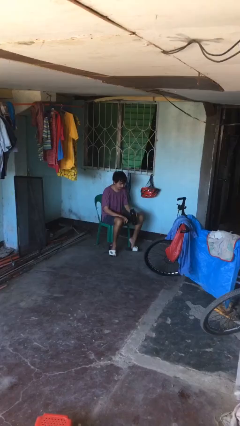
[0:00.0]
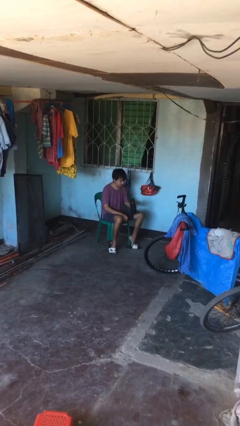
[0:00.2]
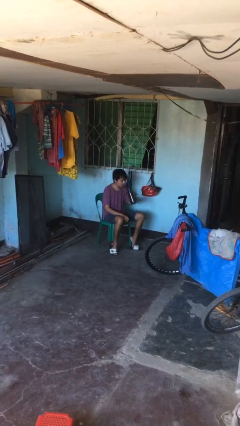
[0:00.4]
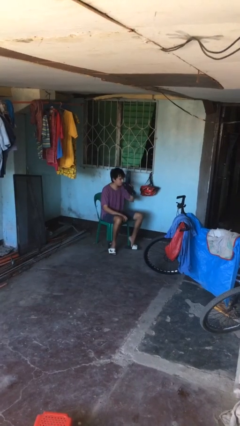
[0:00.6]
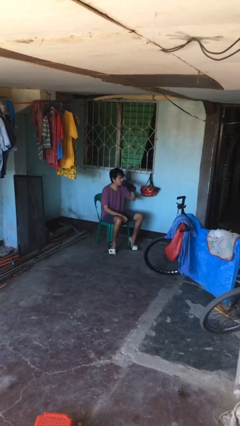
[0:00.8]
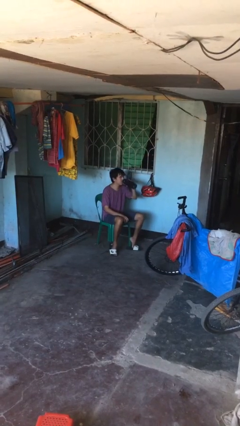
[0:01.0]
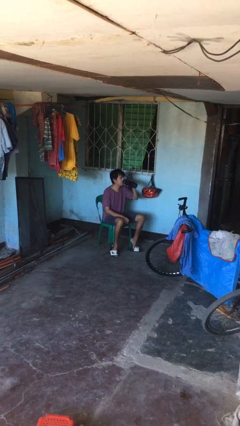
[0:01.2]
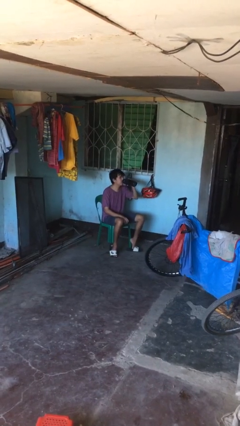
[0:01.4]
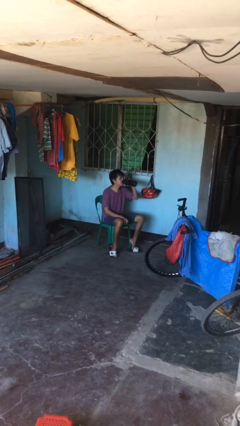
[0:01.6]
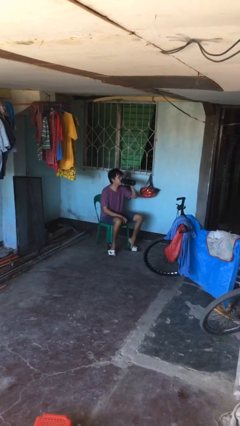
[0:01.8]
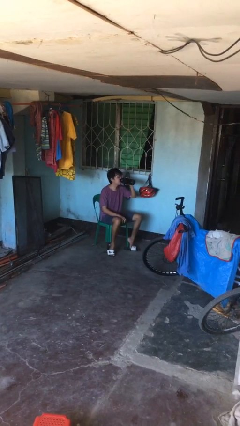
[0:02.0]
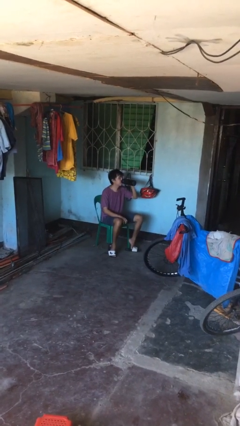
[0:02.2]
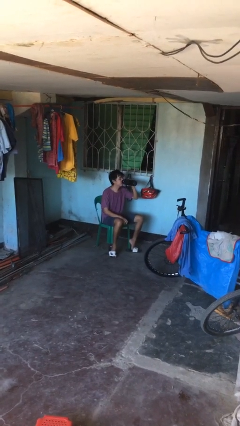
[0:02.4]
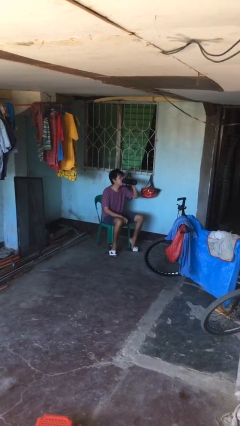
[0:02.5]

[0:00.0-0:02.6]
person drinks from bottle

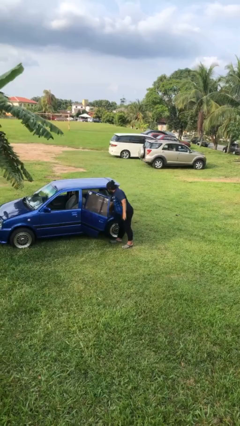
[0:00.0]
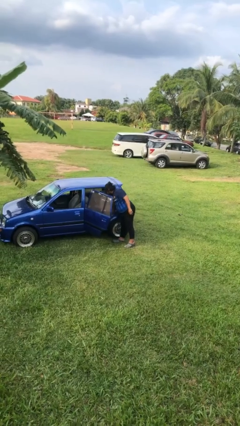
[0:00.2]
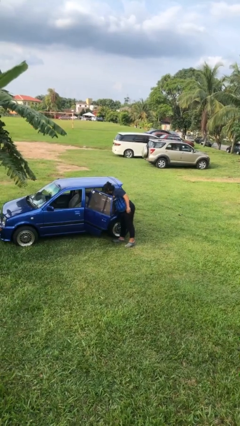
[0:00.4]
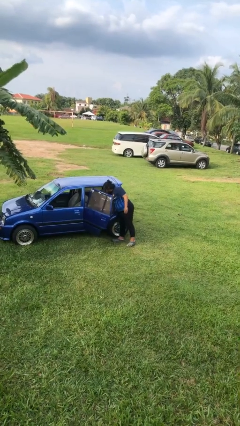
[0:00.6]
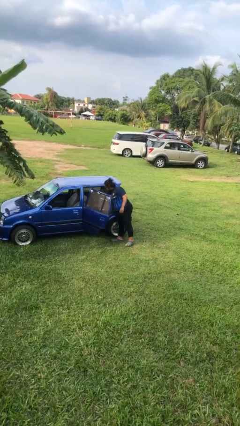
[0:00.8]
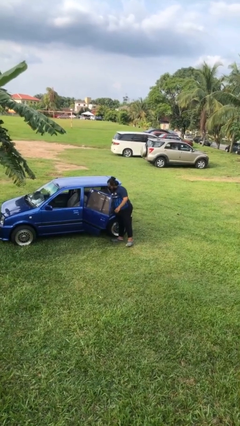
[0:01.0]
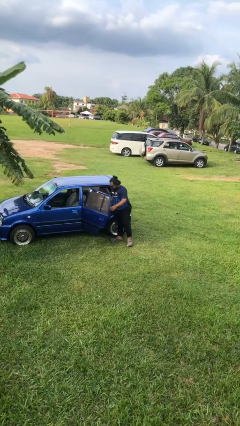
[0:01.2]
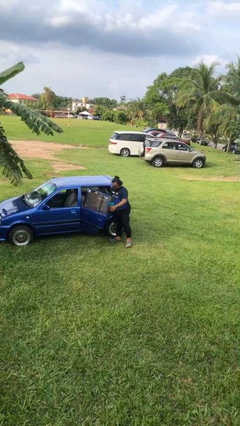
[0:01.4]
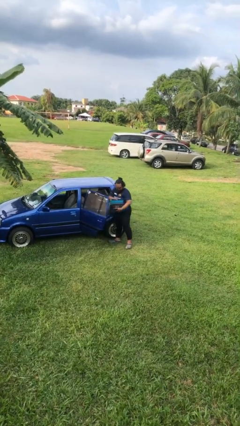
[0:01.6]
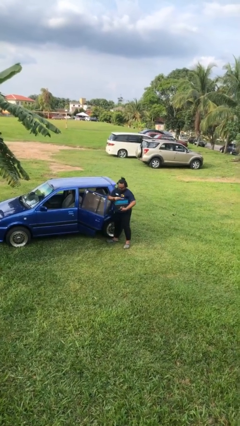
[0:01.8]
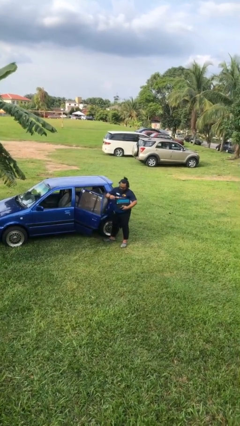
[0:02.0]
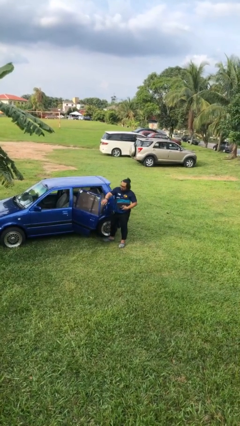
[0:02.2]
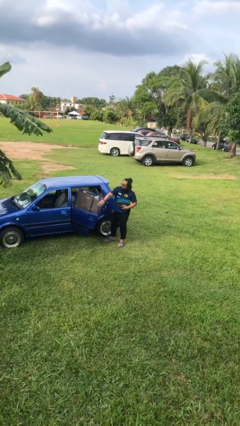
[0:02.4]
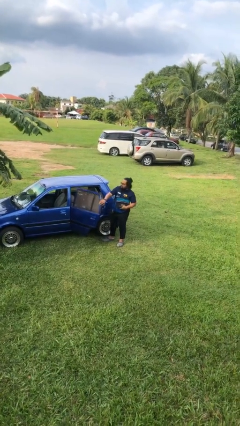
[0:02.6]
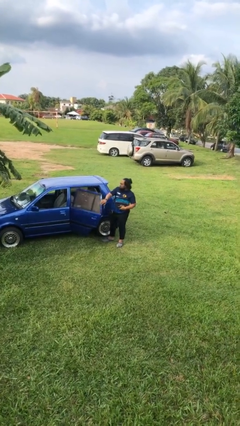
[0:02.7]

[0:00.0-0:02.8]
person unloads car

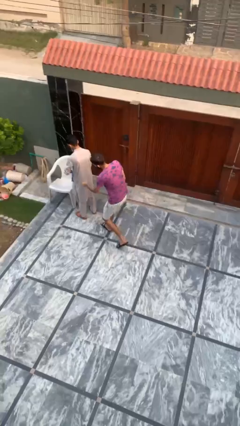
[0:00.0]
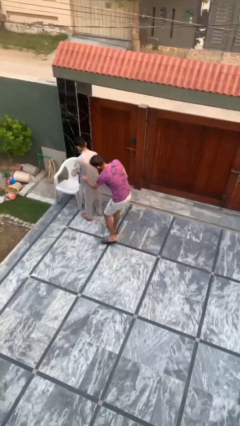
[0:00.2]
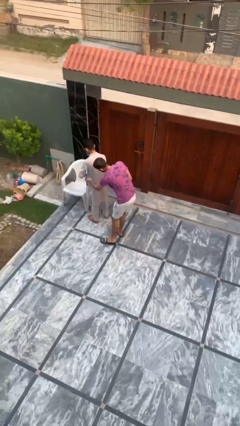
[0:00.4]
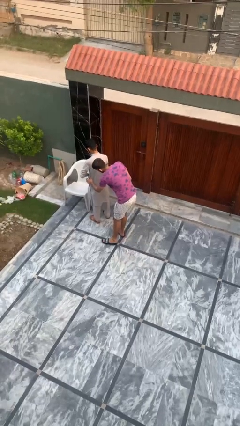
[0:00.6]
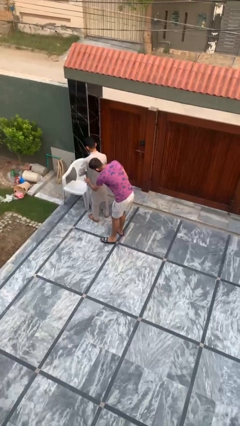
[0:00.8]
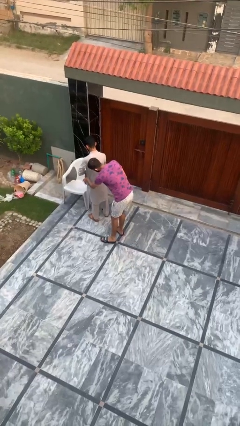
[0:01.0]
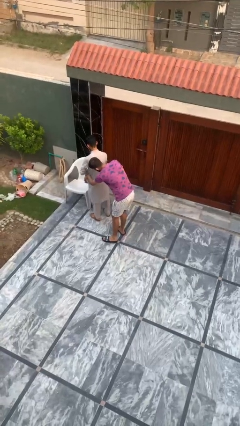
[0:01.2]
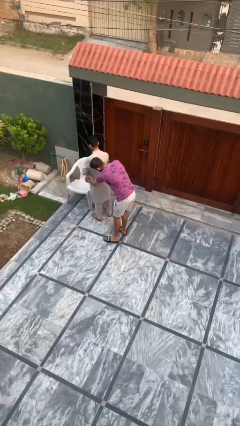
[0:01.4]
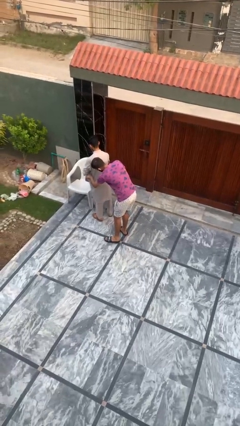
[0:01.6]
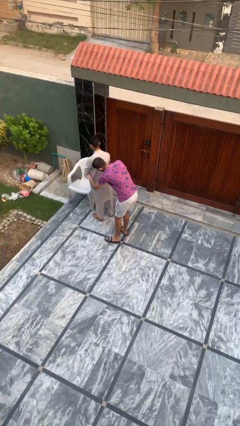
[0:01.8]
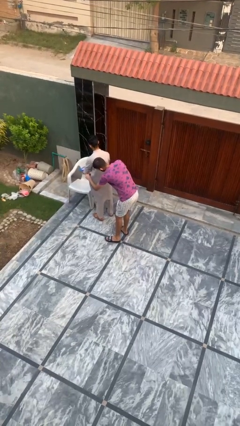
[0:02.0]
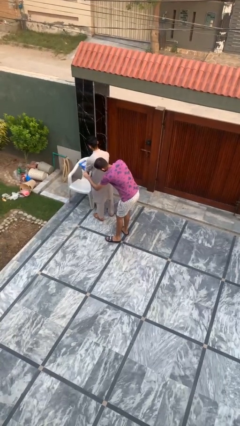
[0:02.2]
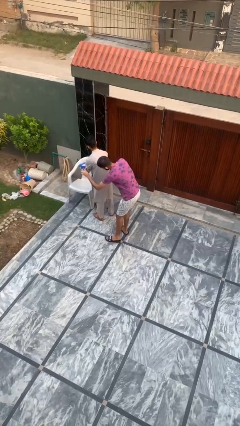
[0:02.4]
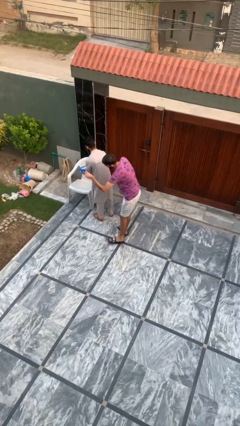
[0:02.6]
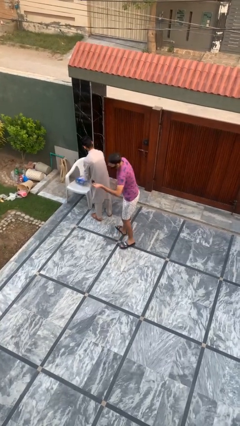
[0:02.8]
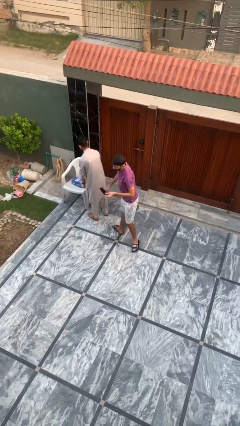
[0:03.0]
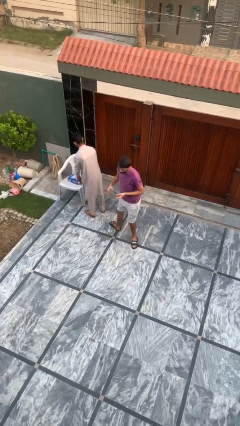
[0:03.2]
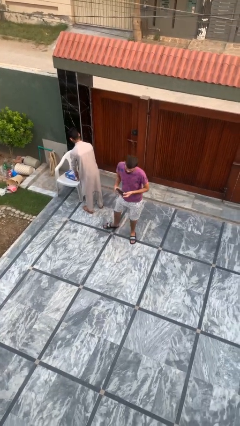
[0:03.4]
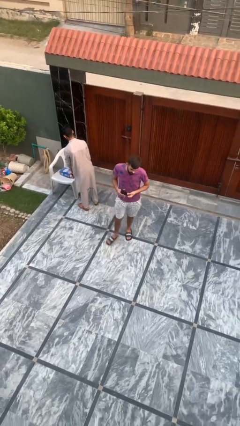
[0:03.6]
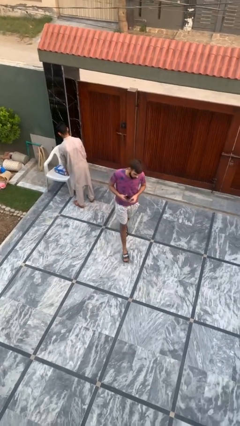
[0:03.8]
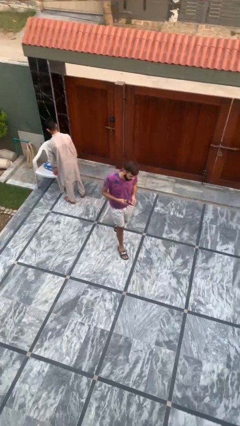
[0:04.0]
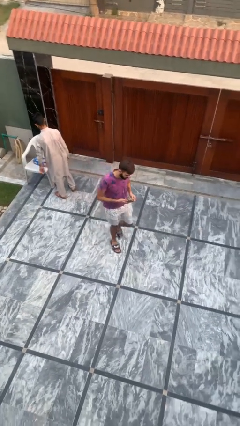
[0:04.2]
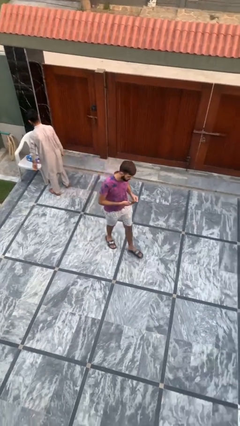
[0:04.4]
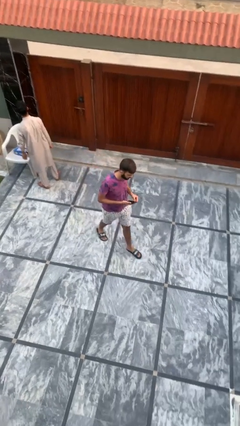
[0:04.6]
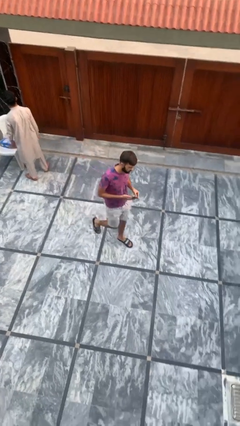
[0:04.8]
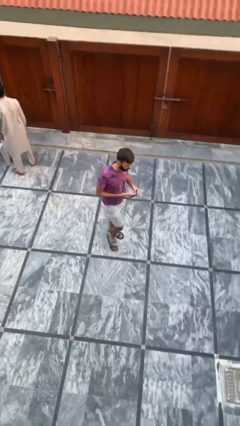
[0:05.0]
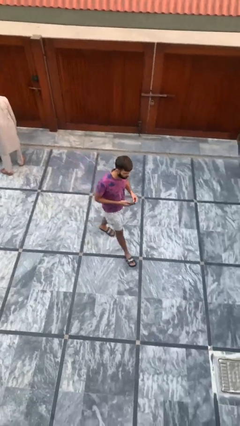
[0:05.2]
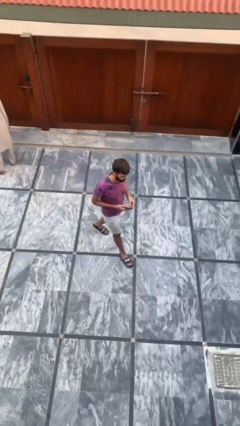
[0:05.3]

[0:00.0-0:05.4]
person steals object from person

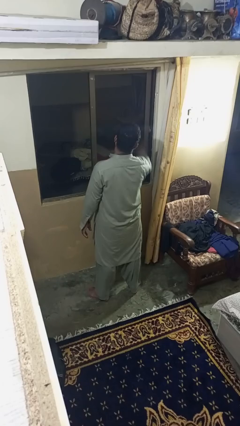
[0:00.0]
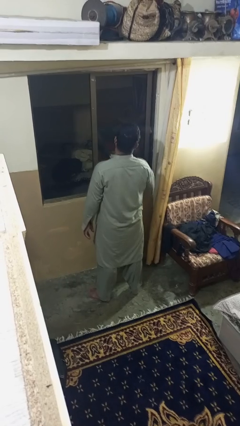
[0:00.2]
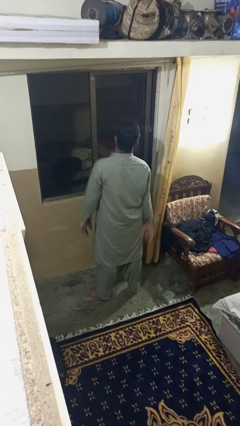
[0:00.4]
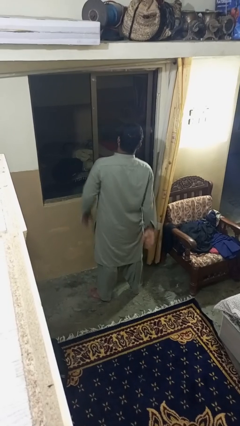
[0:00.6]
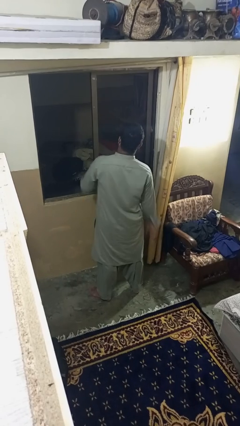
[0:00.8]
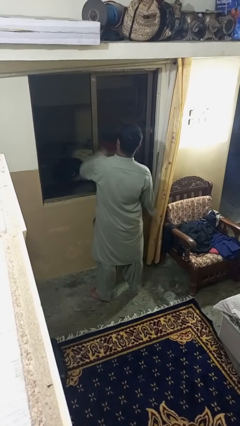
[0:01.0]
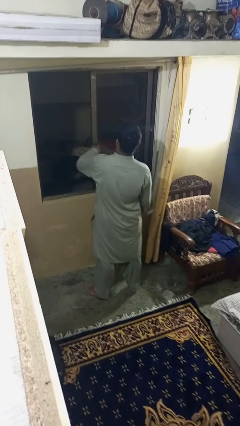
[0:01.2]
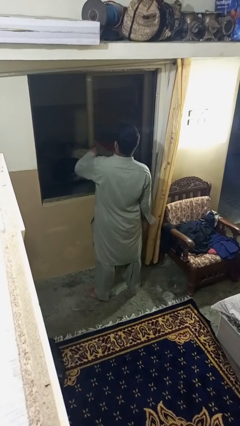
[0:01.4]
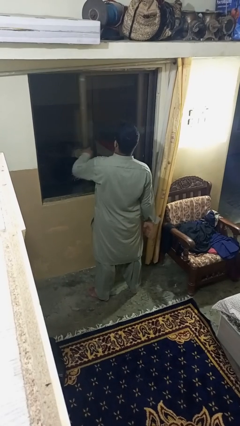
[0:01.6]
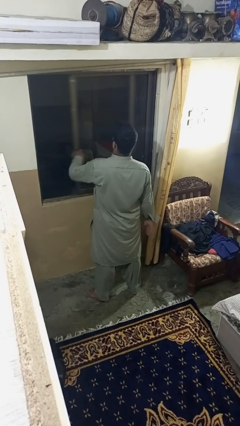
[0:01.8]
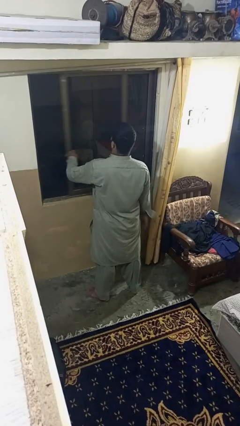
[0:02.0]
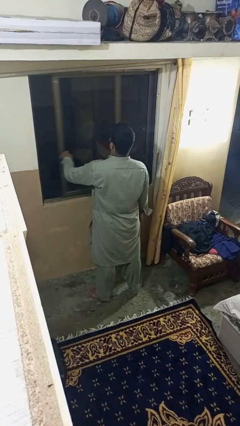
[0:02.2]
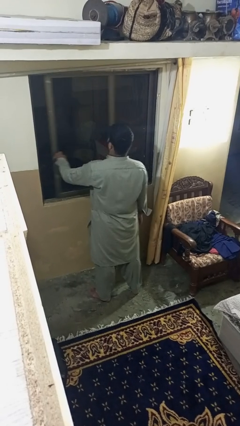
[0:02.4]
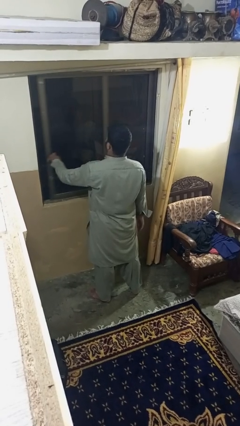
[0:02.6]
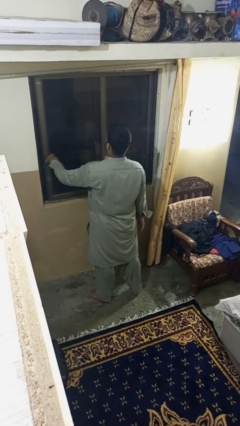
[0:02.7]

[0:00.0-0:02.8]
person closes home window

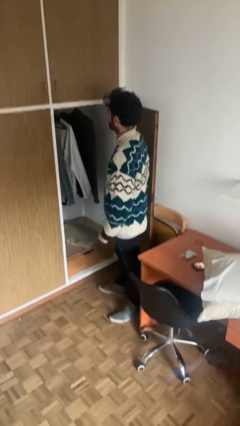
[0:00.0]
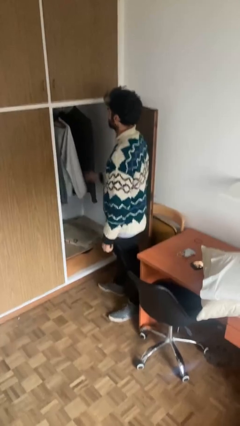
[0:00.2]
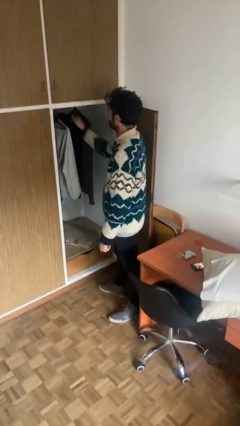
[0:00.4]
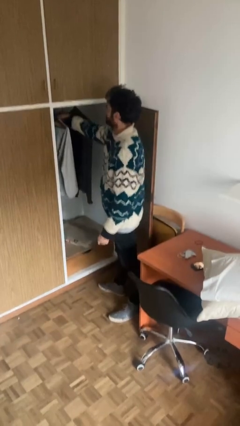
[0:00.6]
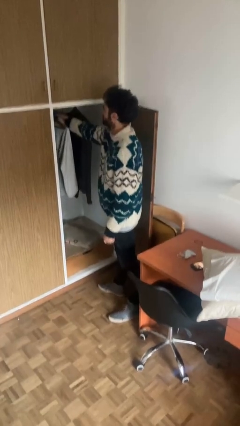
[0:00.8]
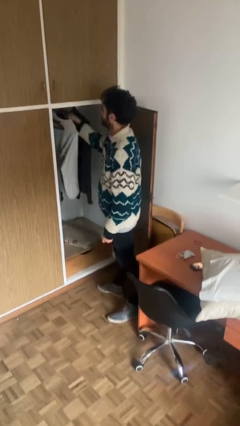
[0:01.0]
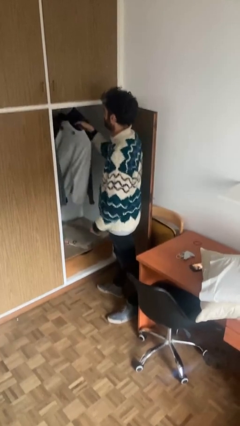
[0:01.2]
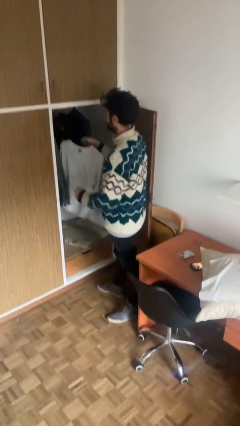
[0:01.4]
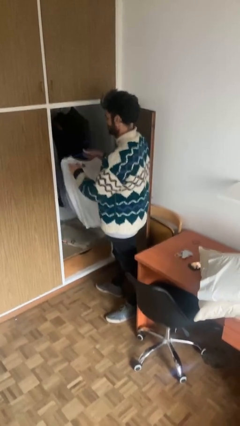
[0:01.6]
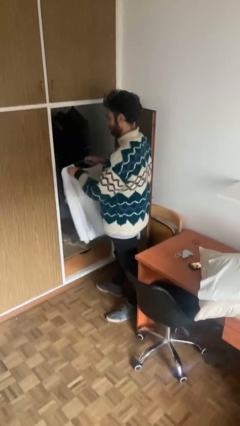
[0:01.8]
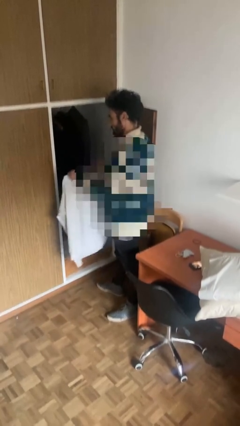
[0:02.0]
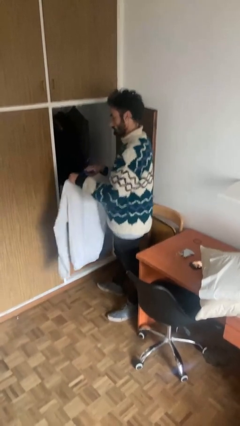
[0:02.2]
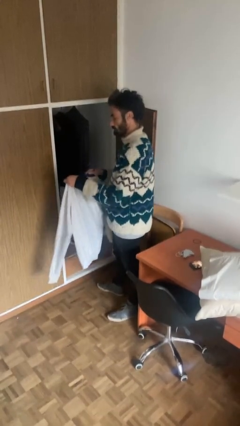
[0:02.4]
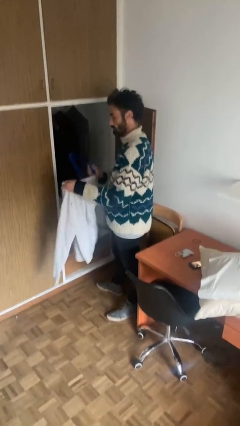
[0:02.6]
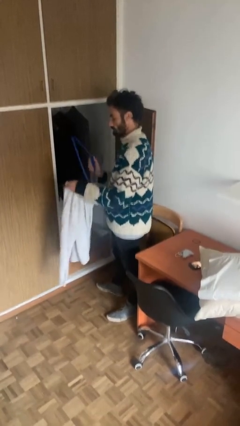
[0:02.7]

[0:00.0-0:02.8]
person takes clothes from closet

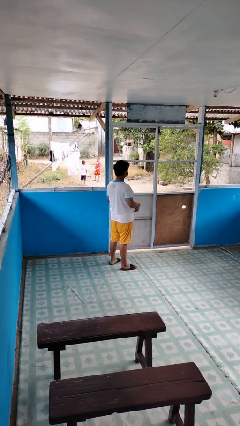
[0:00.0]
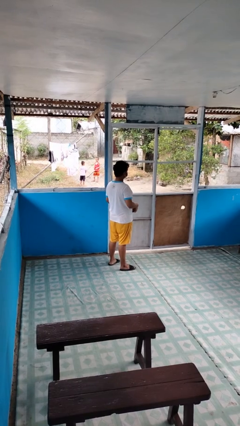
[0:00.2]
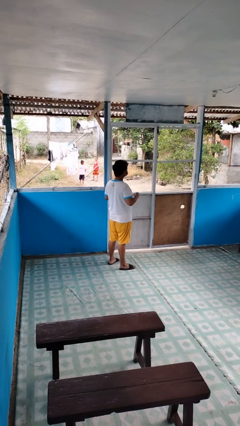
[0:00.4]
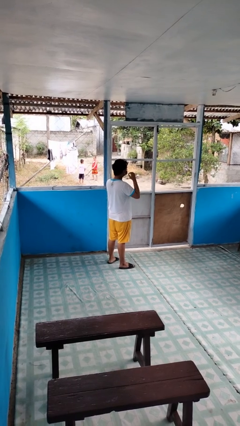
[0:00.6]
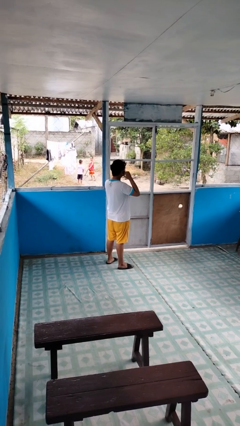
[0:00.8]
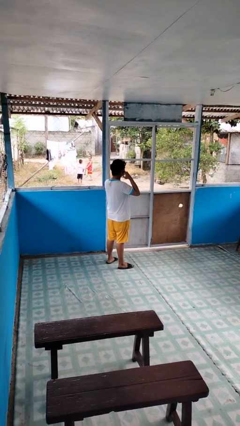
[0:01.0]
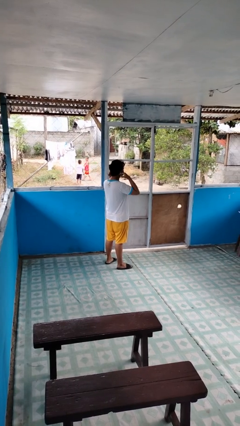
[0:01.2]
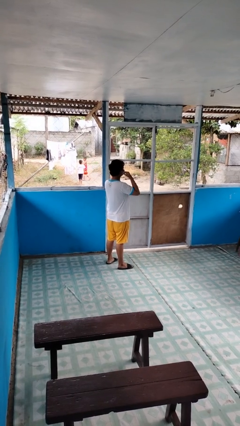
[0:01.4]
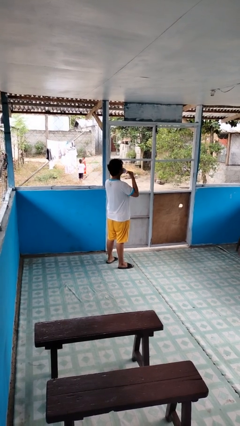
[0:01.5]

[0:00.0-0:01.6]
person takes off facemask
